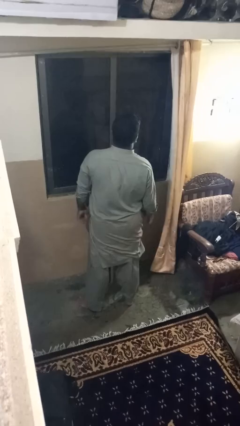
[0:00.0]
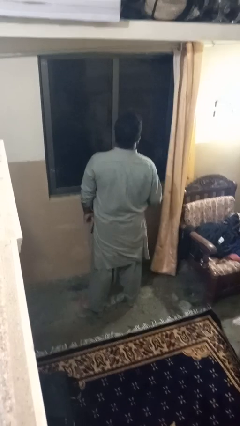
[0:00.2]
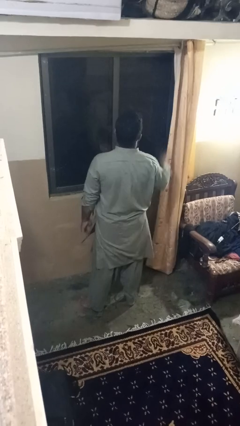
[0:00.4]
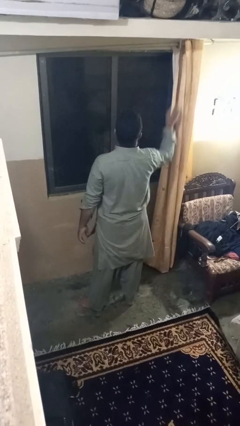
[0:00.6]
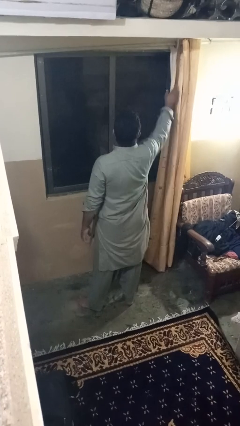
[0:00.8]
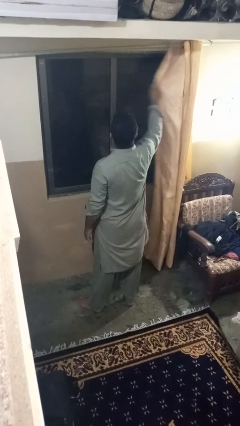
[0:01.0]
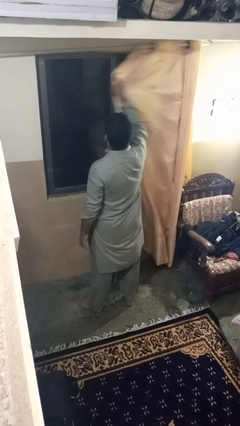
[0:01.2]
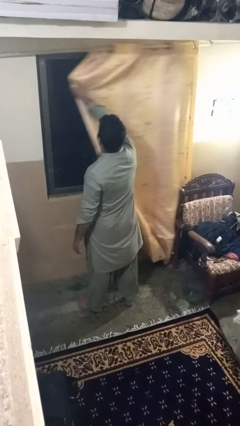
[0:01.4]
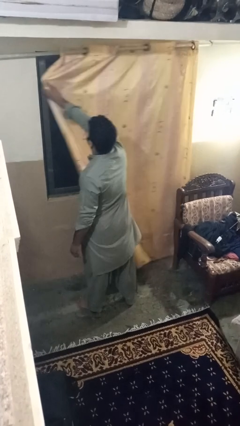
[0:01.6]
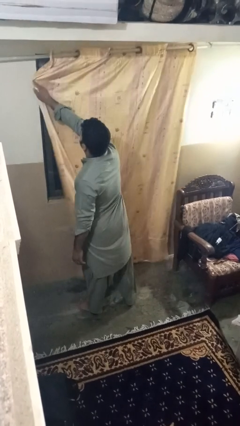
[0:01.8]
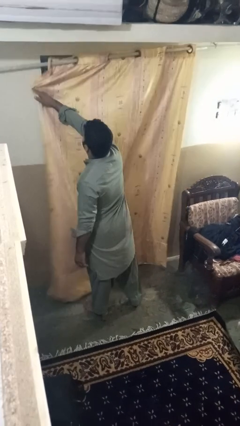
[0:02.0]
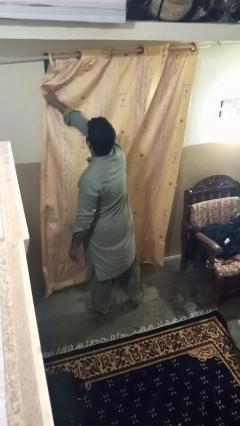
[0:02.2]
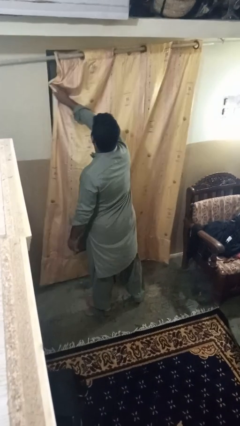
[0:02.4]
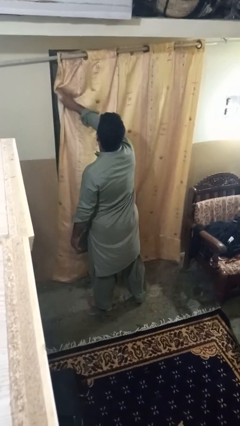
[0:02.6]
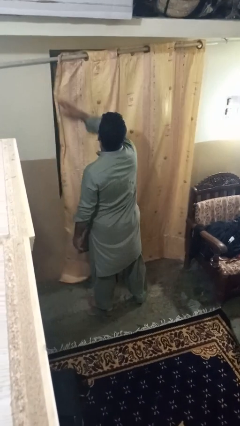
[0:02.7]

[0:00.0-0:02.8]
person closes curtains

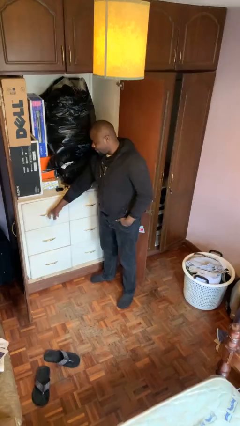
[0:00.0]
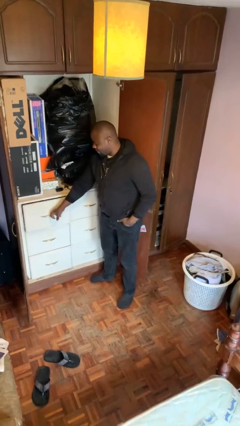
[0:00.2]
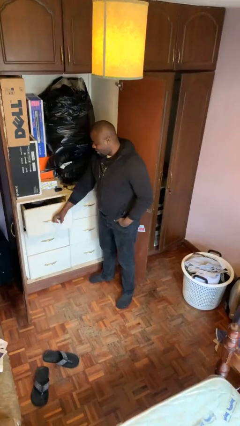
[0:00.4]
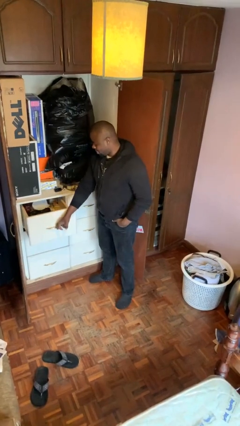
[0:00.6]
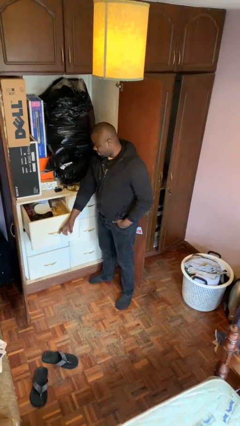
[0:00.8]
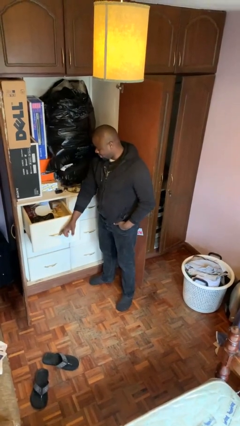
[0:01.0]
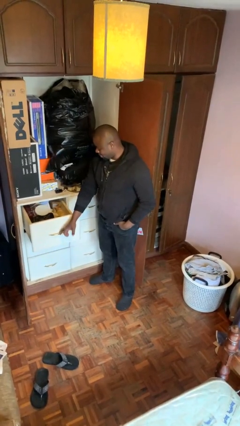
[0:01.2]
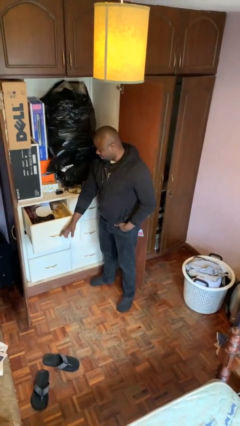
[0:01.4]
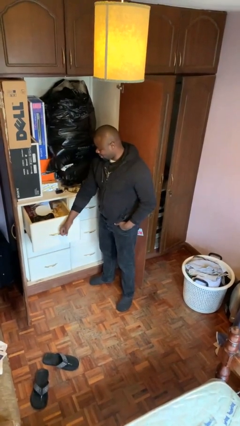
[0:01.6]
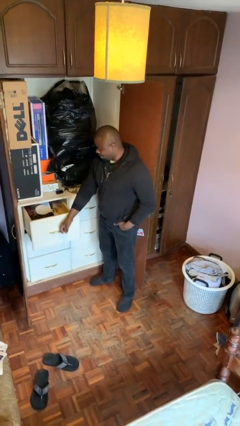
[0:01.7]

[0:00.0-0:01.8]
person opens dresser drawer

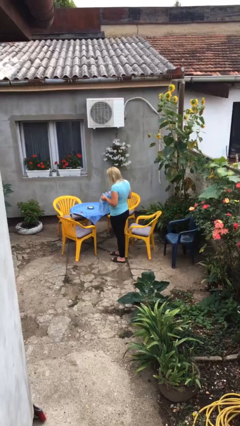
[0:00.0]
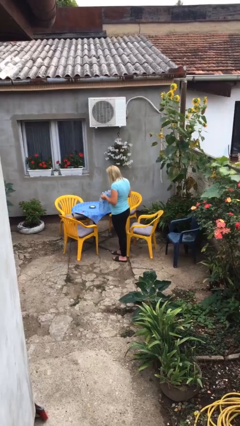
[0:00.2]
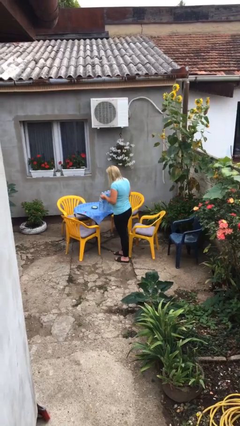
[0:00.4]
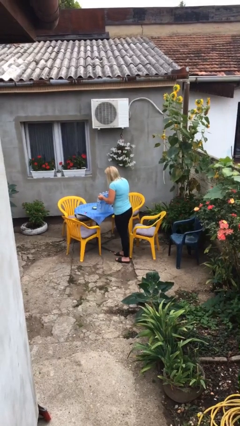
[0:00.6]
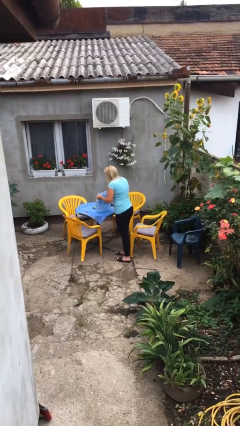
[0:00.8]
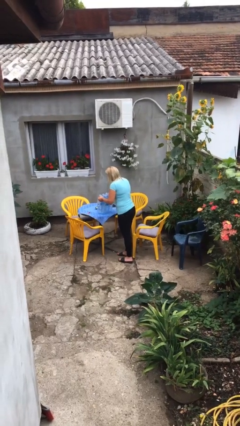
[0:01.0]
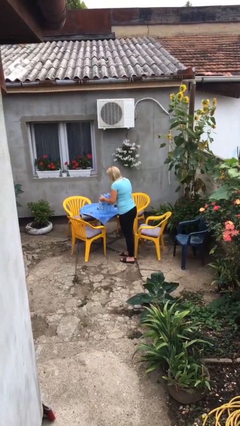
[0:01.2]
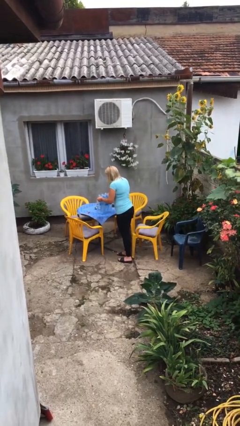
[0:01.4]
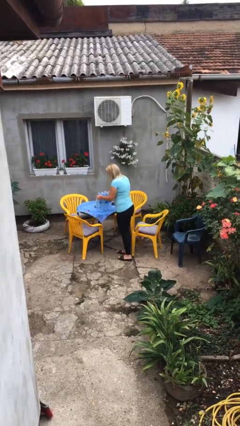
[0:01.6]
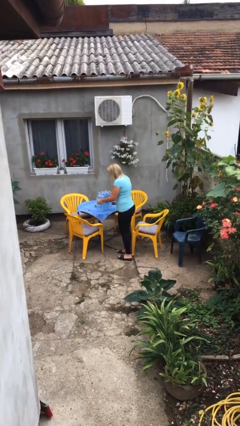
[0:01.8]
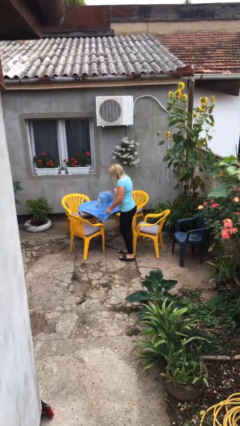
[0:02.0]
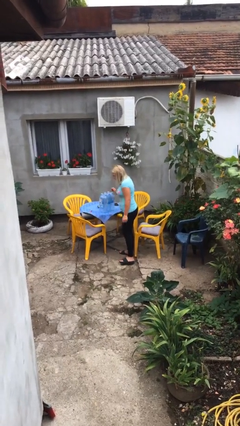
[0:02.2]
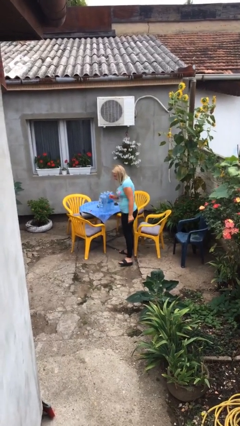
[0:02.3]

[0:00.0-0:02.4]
person puts down object on table

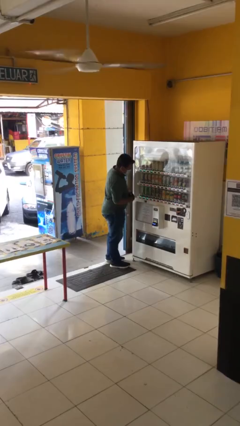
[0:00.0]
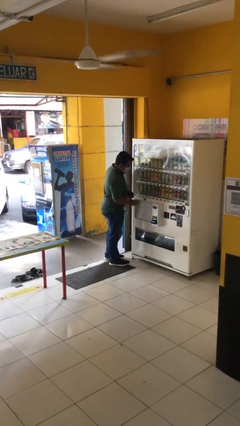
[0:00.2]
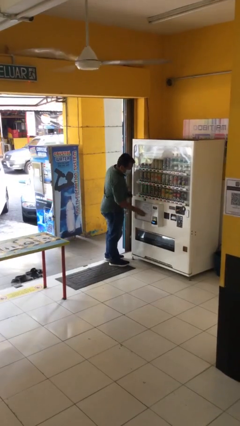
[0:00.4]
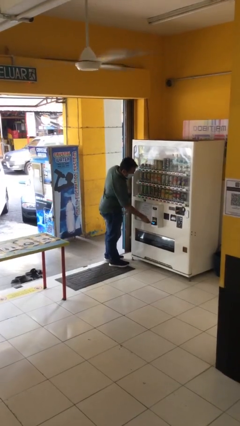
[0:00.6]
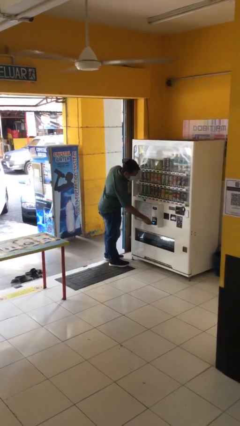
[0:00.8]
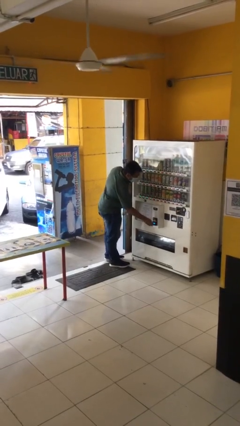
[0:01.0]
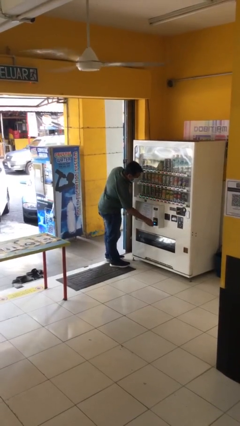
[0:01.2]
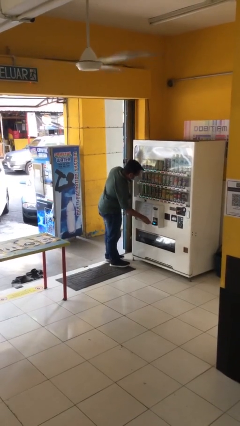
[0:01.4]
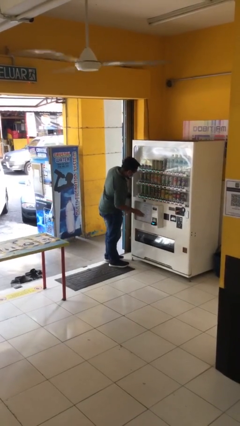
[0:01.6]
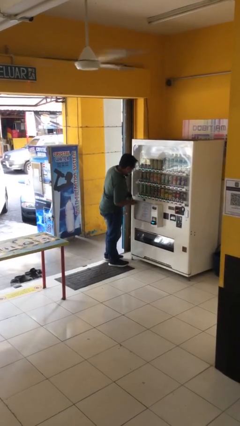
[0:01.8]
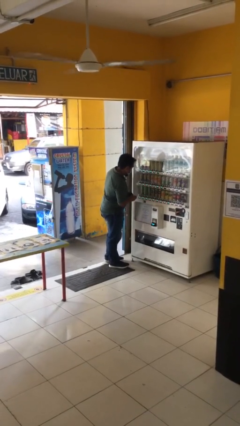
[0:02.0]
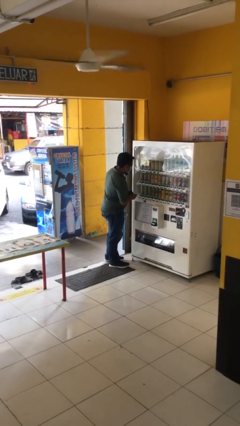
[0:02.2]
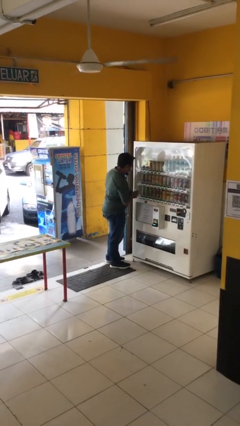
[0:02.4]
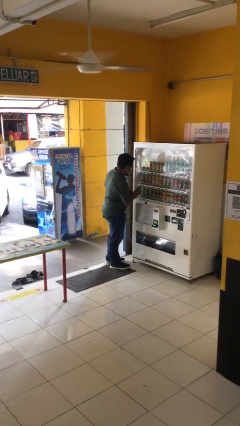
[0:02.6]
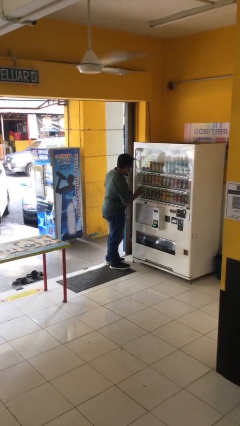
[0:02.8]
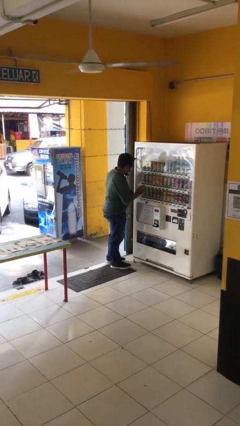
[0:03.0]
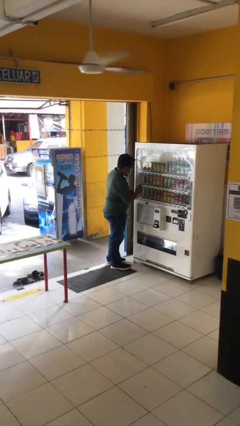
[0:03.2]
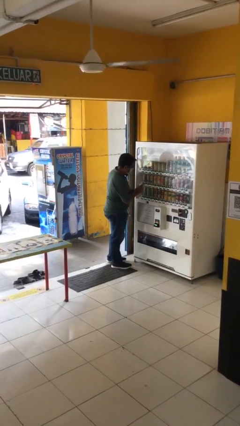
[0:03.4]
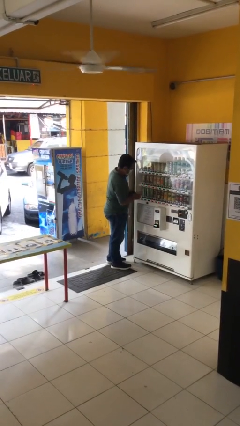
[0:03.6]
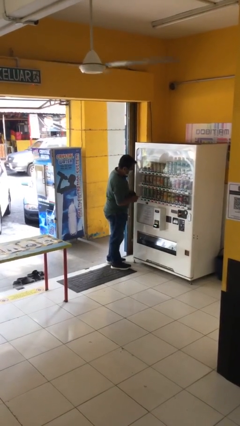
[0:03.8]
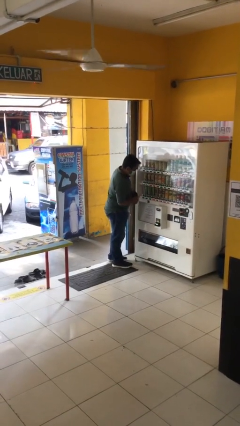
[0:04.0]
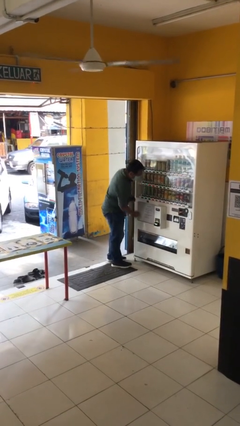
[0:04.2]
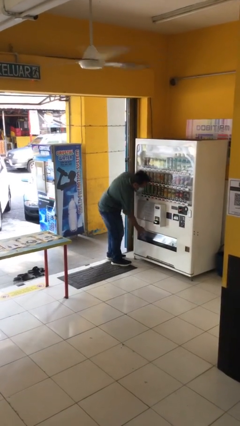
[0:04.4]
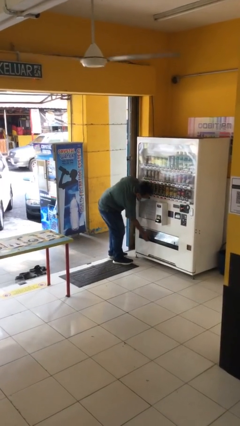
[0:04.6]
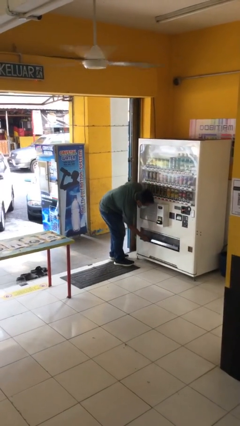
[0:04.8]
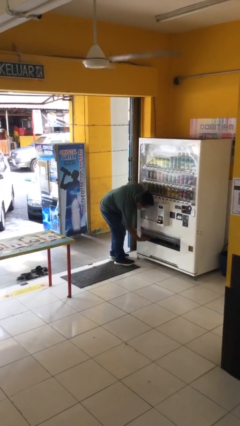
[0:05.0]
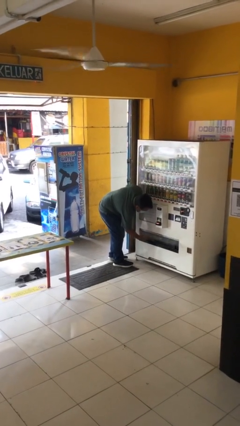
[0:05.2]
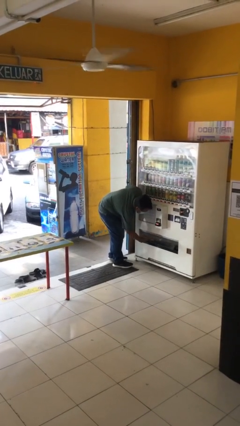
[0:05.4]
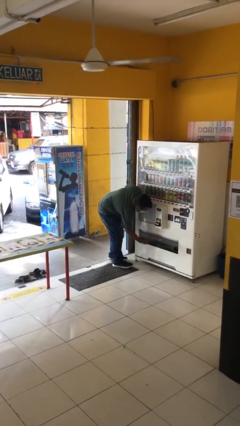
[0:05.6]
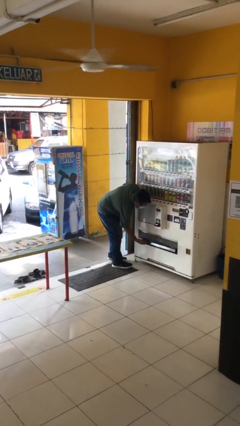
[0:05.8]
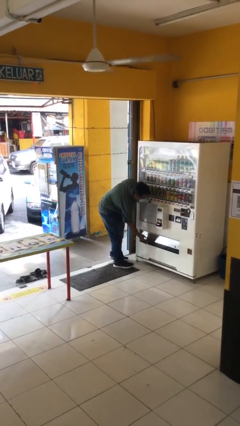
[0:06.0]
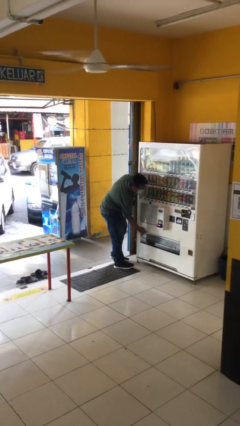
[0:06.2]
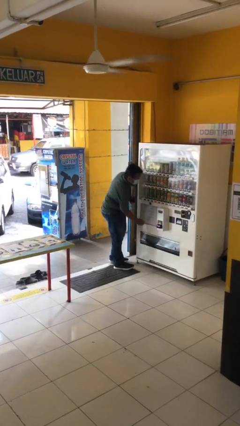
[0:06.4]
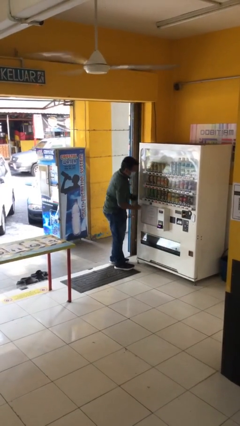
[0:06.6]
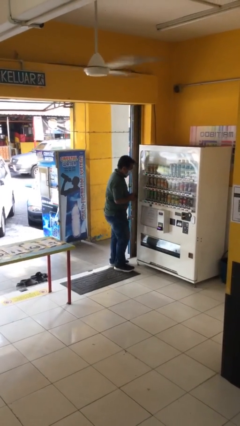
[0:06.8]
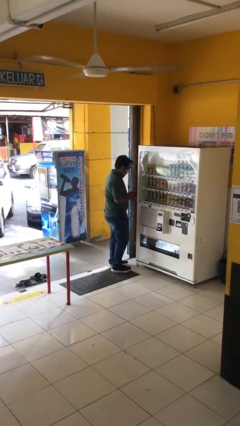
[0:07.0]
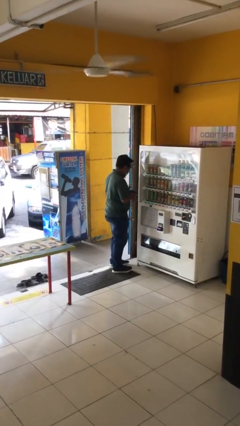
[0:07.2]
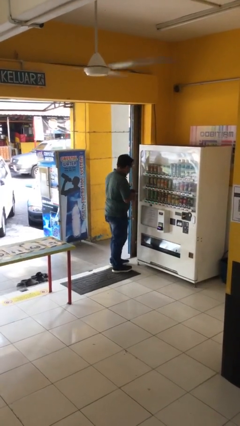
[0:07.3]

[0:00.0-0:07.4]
person purchases from machine

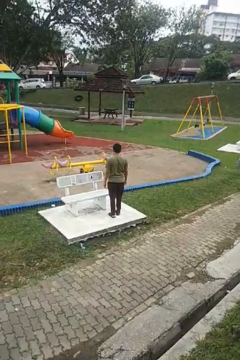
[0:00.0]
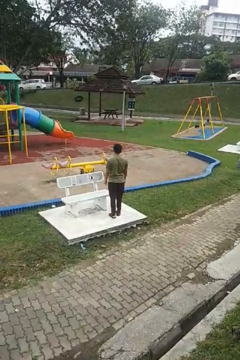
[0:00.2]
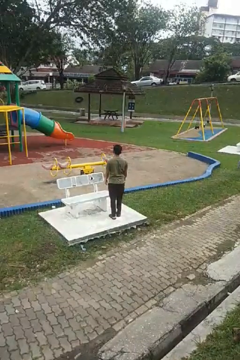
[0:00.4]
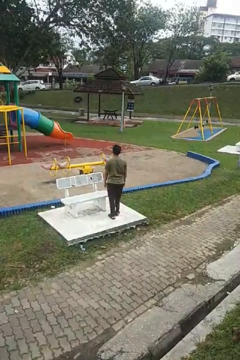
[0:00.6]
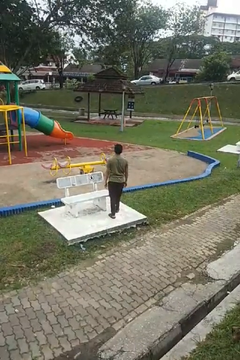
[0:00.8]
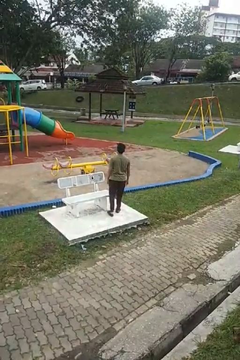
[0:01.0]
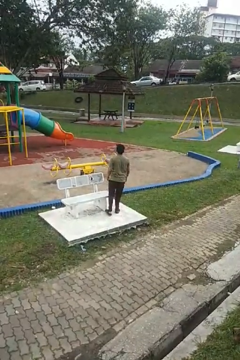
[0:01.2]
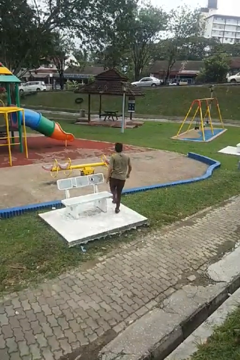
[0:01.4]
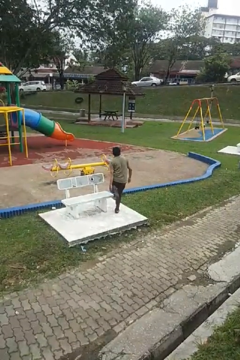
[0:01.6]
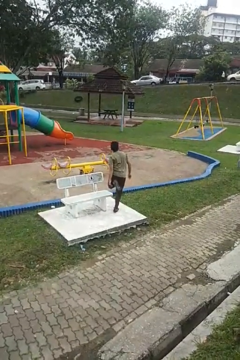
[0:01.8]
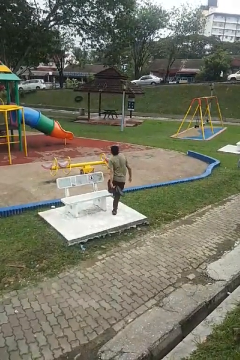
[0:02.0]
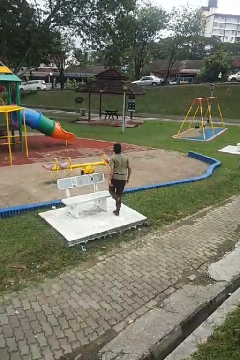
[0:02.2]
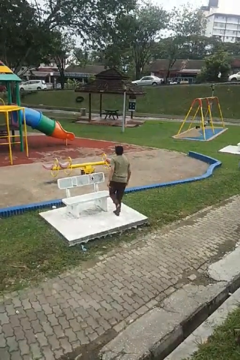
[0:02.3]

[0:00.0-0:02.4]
person stubs toe

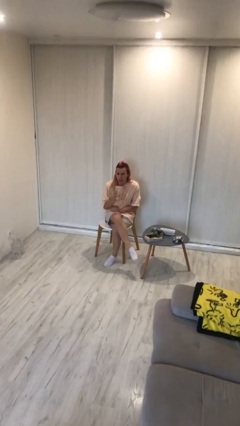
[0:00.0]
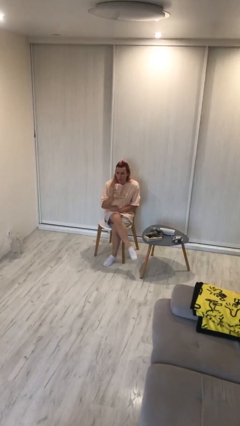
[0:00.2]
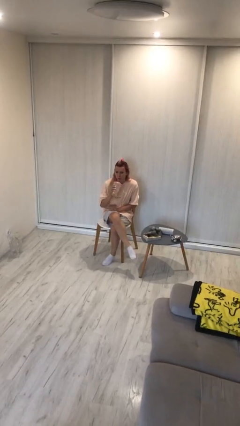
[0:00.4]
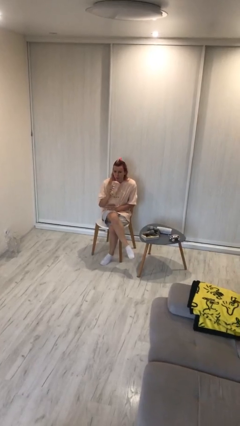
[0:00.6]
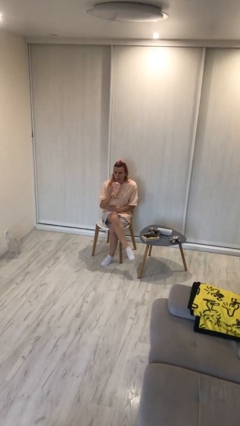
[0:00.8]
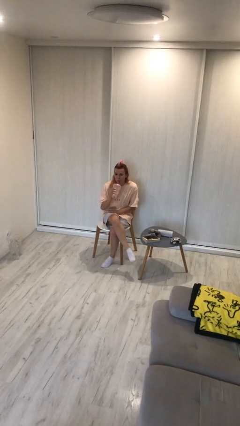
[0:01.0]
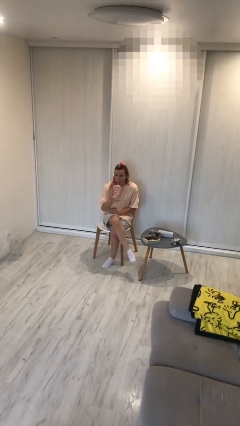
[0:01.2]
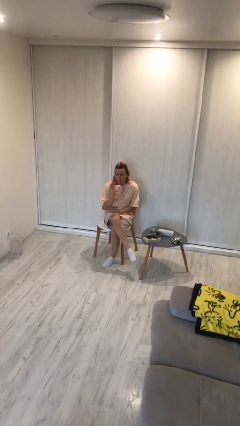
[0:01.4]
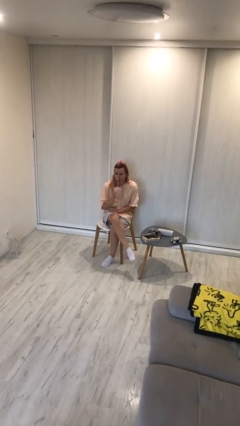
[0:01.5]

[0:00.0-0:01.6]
person drinks from straw
